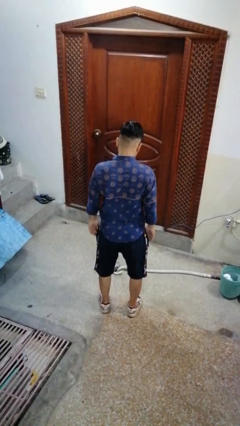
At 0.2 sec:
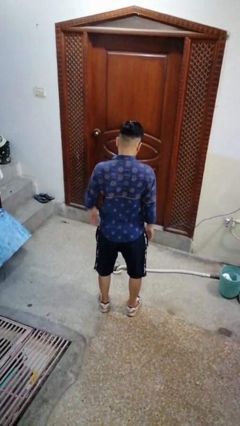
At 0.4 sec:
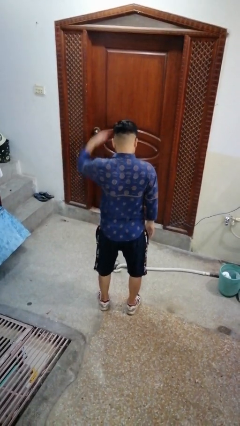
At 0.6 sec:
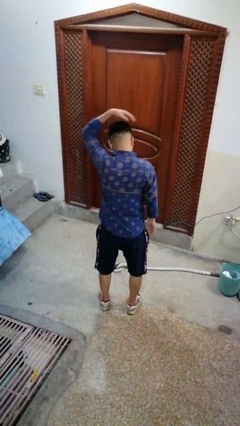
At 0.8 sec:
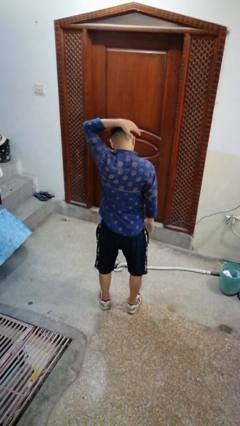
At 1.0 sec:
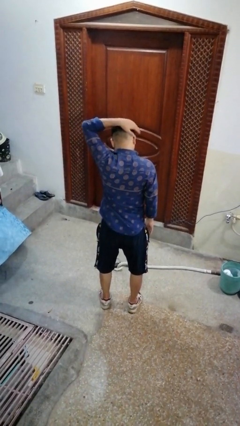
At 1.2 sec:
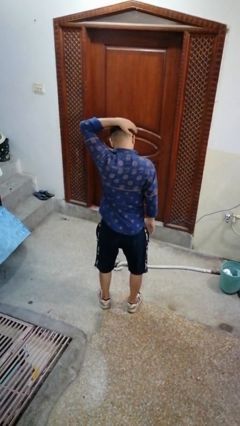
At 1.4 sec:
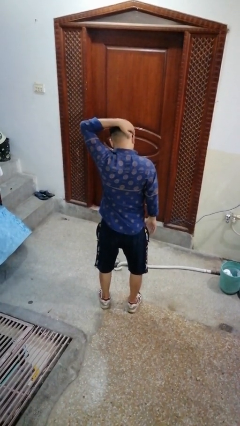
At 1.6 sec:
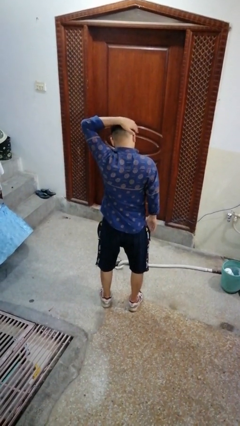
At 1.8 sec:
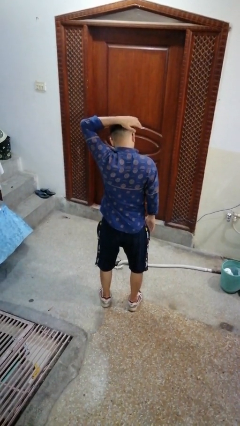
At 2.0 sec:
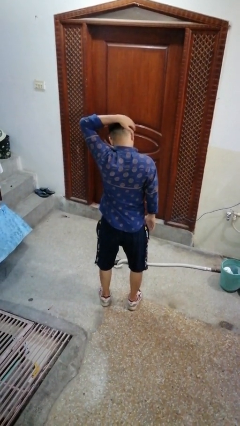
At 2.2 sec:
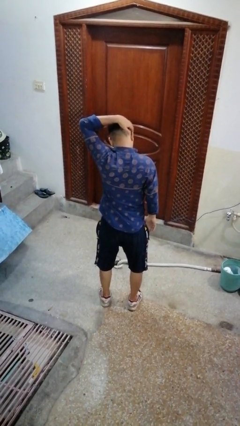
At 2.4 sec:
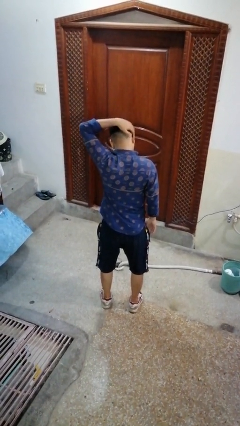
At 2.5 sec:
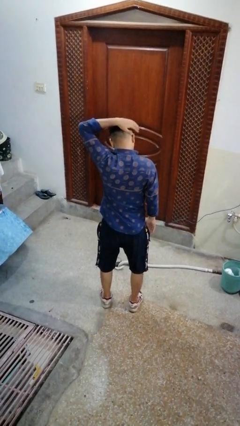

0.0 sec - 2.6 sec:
person pats head

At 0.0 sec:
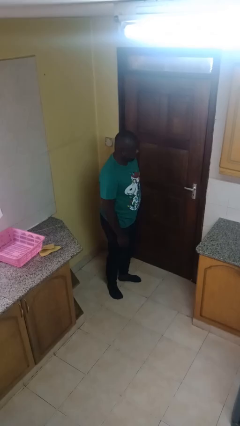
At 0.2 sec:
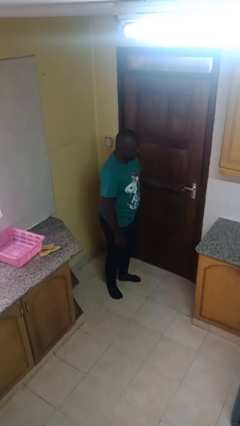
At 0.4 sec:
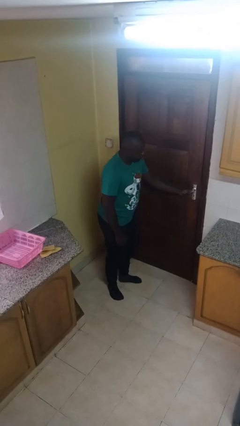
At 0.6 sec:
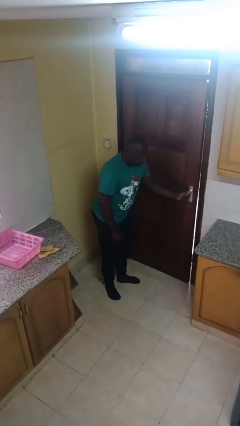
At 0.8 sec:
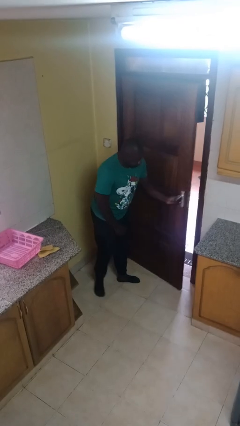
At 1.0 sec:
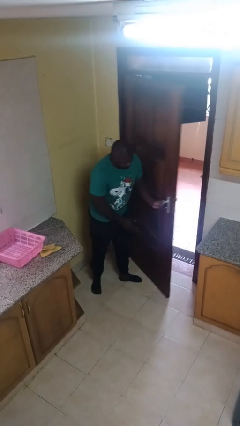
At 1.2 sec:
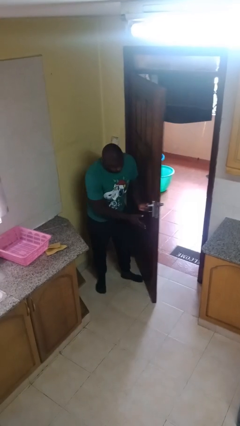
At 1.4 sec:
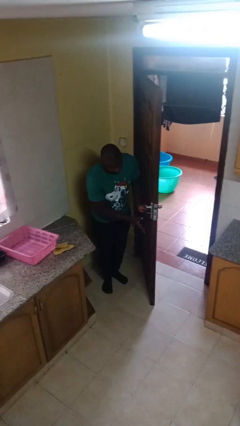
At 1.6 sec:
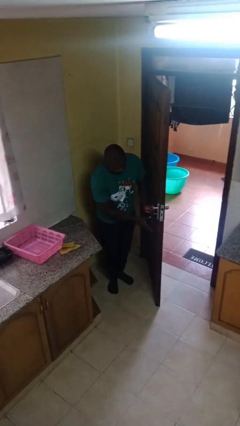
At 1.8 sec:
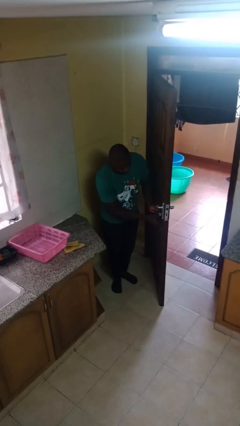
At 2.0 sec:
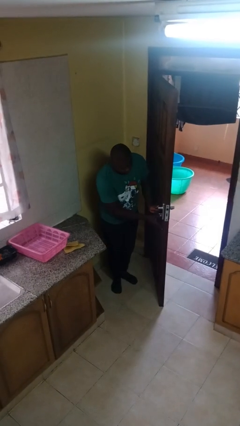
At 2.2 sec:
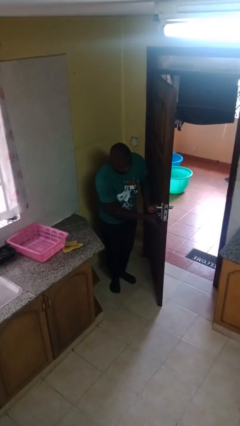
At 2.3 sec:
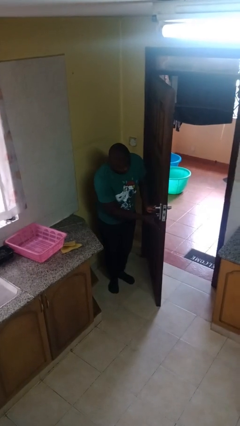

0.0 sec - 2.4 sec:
person opens facility door

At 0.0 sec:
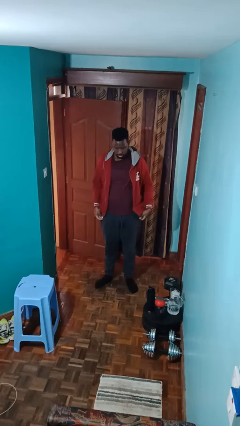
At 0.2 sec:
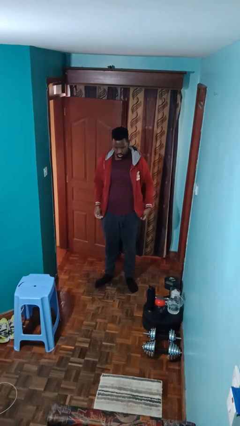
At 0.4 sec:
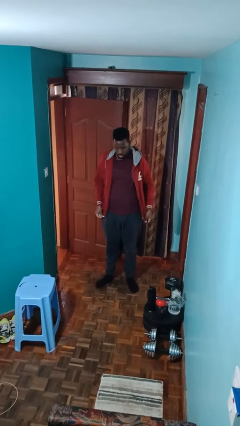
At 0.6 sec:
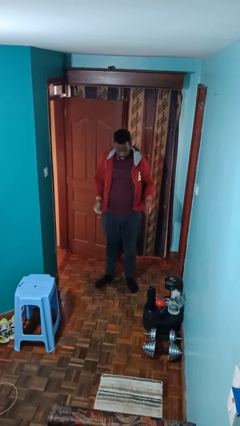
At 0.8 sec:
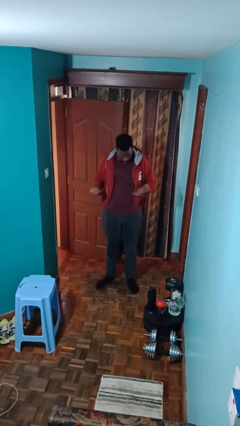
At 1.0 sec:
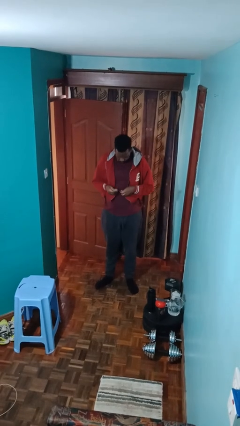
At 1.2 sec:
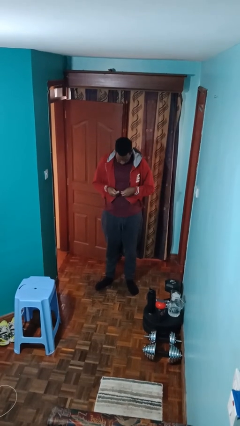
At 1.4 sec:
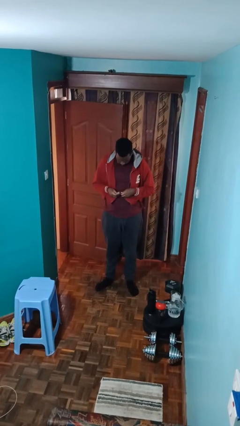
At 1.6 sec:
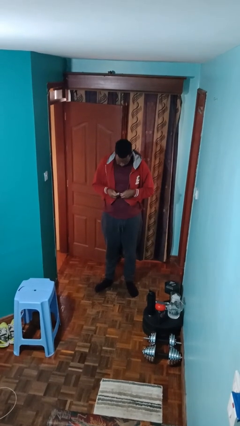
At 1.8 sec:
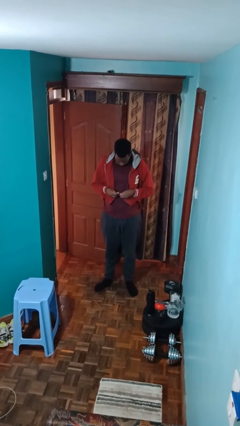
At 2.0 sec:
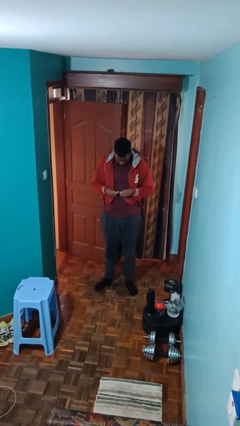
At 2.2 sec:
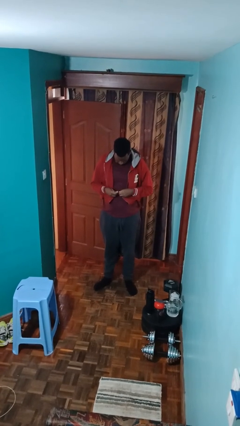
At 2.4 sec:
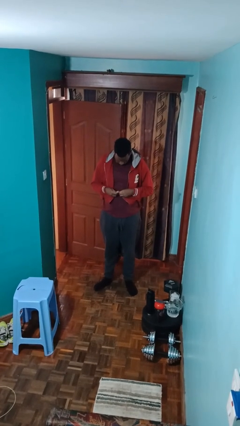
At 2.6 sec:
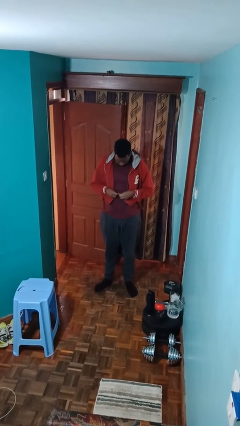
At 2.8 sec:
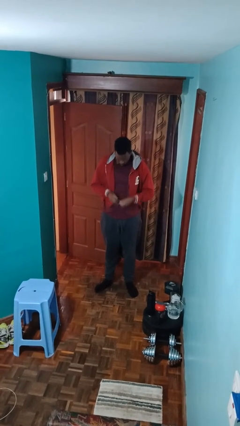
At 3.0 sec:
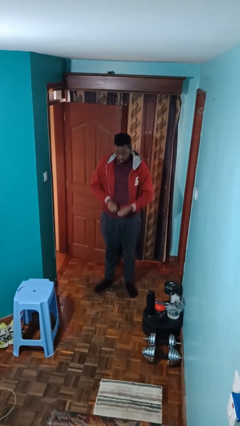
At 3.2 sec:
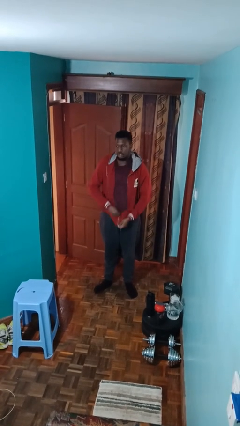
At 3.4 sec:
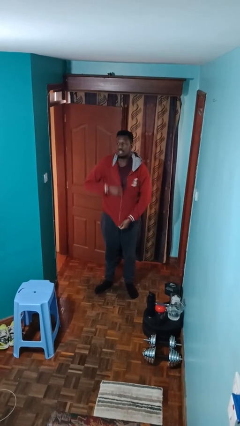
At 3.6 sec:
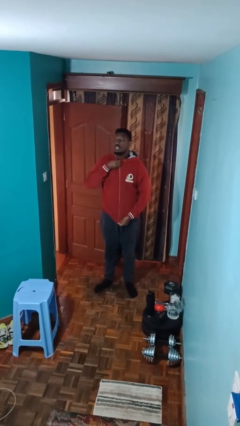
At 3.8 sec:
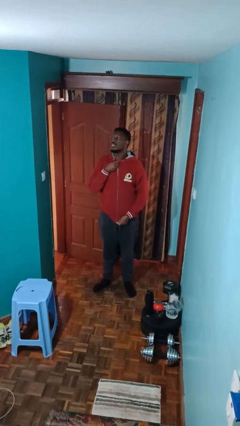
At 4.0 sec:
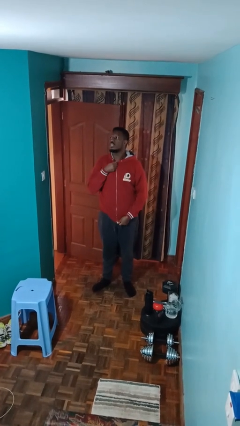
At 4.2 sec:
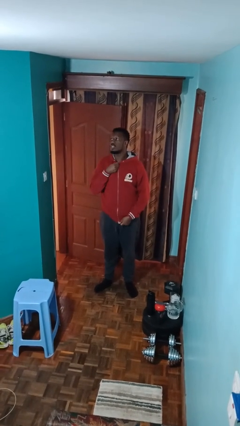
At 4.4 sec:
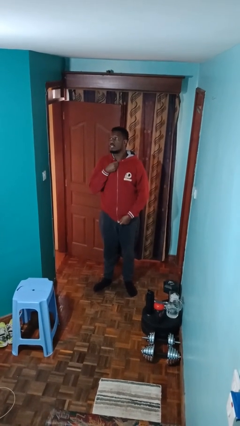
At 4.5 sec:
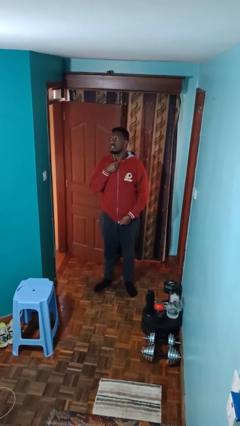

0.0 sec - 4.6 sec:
person zips up jacket

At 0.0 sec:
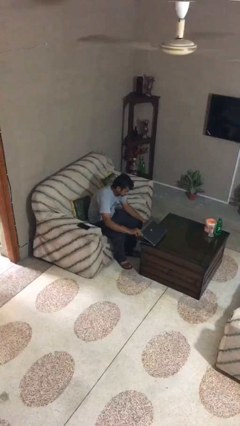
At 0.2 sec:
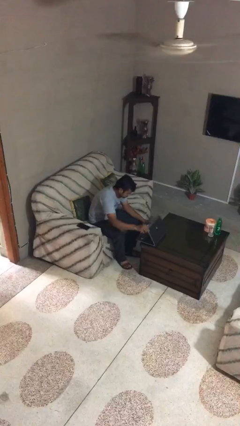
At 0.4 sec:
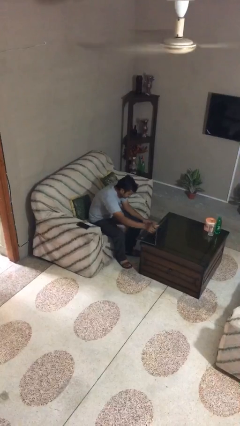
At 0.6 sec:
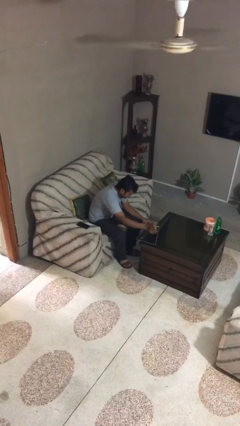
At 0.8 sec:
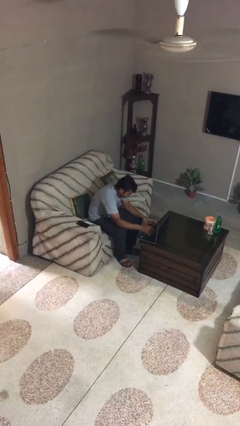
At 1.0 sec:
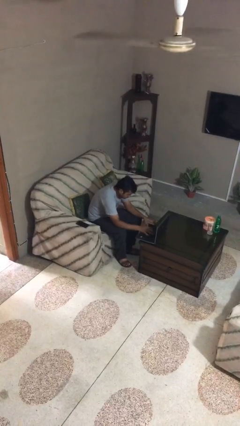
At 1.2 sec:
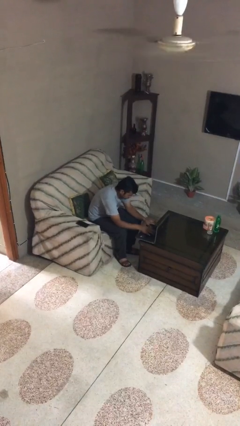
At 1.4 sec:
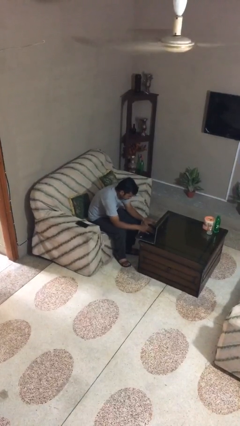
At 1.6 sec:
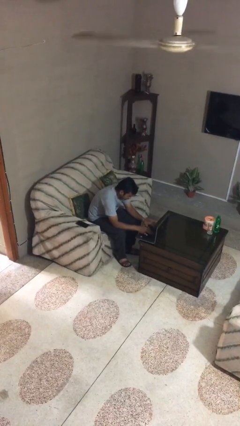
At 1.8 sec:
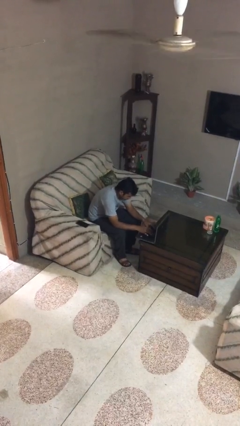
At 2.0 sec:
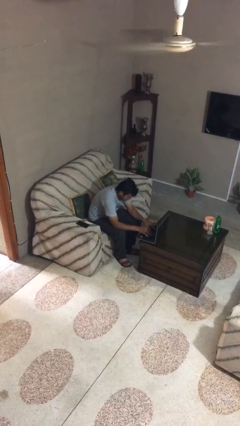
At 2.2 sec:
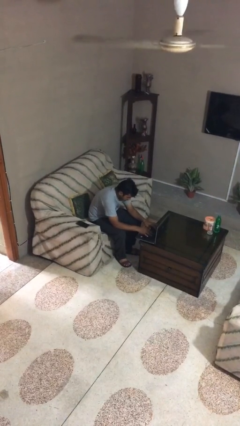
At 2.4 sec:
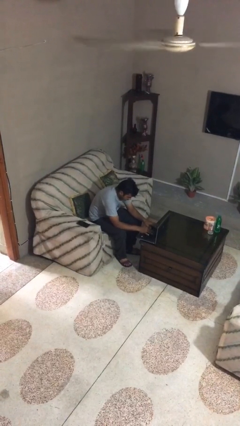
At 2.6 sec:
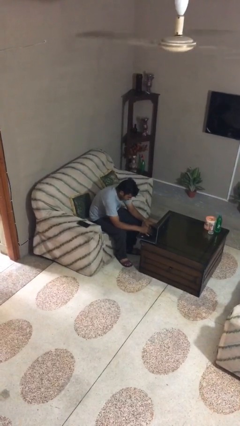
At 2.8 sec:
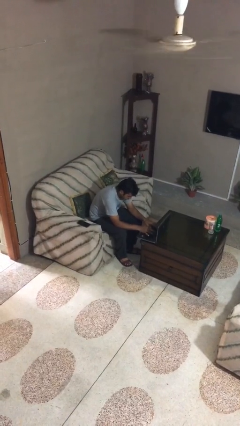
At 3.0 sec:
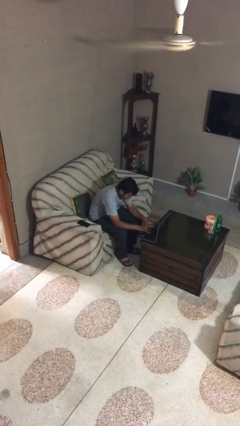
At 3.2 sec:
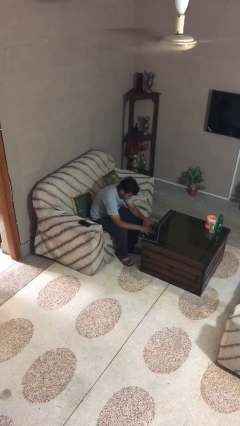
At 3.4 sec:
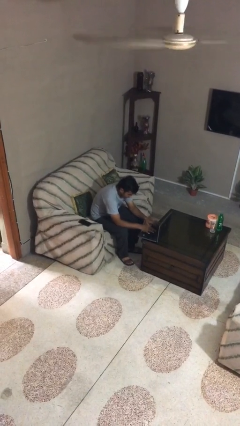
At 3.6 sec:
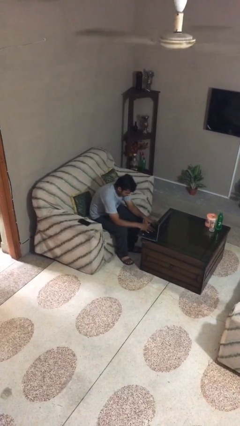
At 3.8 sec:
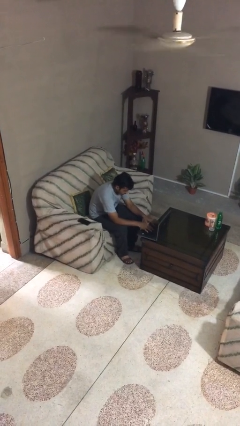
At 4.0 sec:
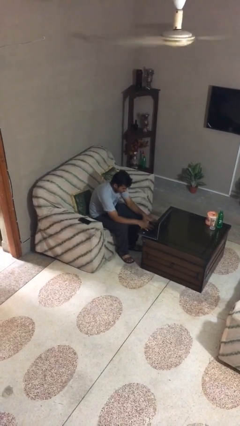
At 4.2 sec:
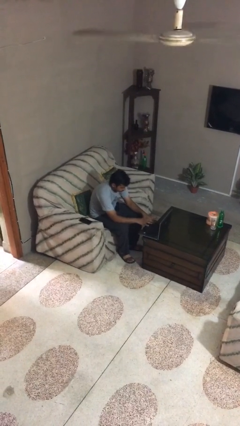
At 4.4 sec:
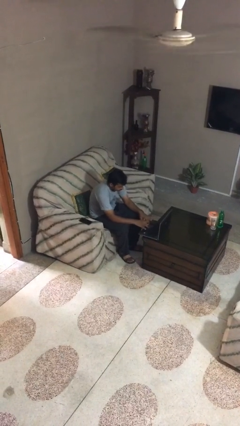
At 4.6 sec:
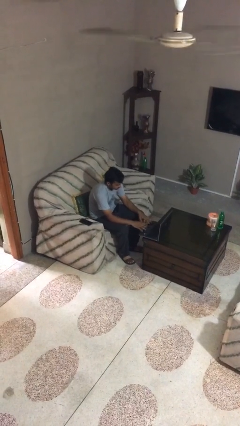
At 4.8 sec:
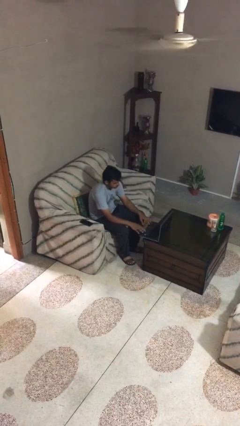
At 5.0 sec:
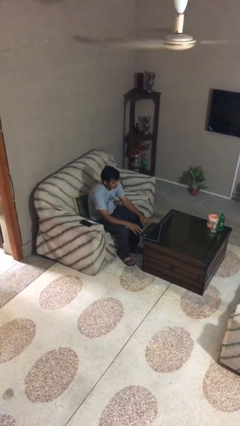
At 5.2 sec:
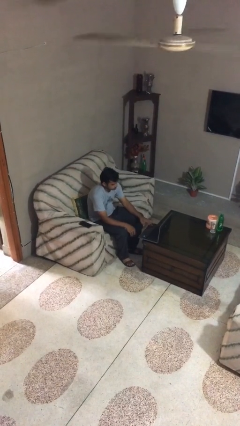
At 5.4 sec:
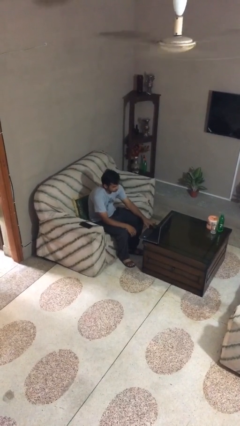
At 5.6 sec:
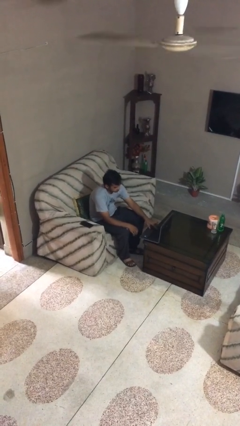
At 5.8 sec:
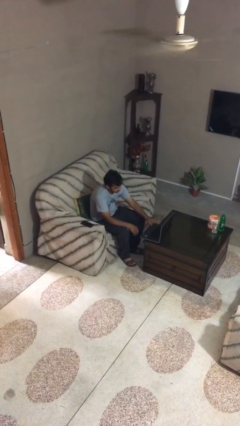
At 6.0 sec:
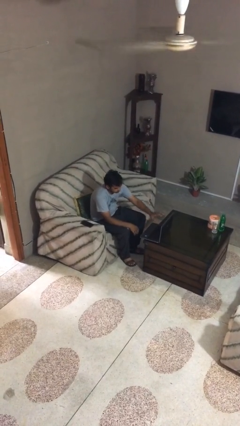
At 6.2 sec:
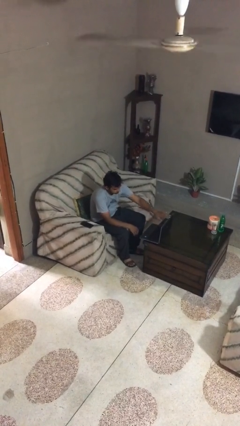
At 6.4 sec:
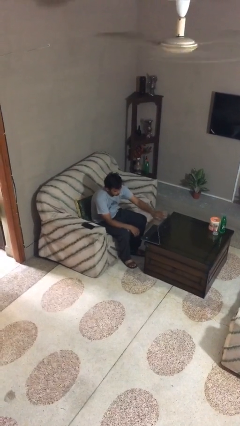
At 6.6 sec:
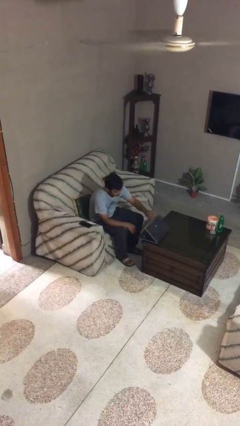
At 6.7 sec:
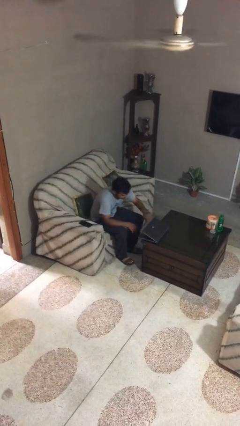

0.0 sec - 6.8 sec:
person interacts with laptop

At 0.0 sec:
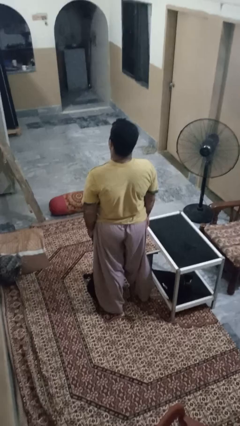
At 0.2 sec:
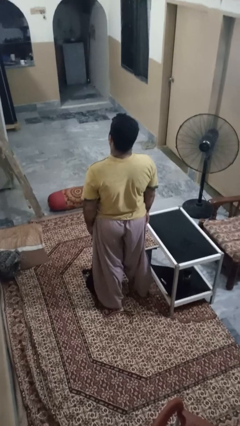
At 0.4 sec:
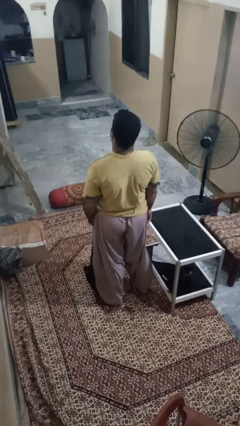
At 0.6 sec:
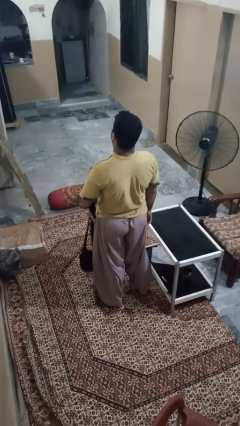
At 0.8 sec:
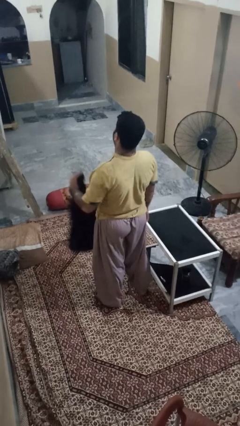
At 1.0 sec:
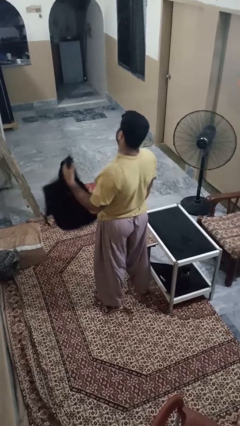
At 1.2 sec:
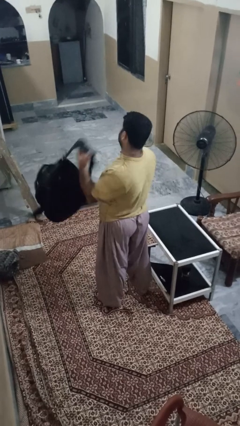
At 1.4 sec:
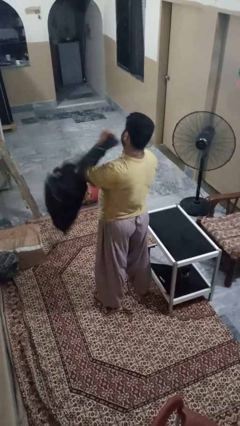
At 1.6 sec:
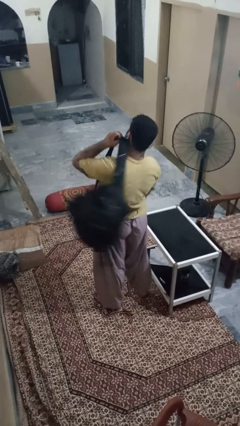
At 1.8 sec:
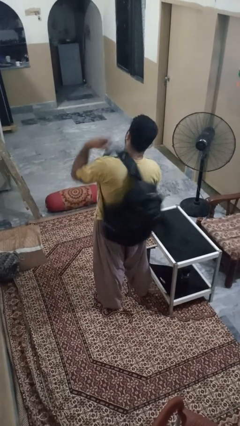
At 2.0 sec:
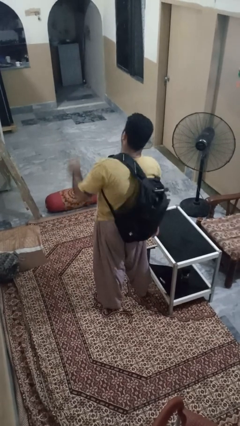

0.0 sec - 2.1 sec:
person puts on backpack
